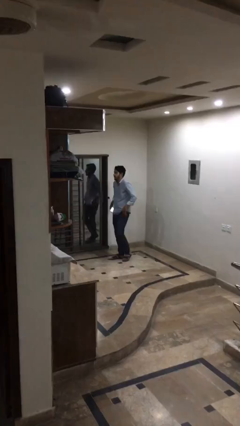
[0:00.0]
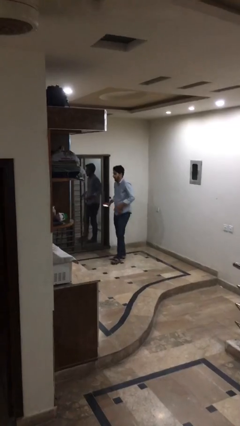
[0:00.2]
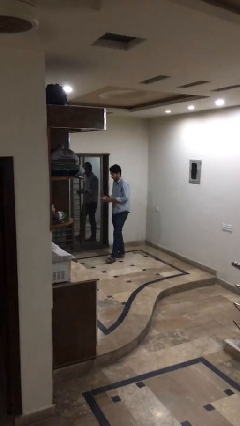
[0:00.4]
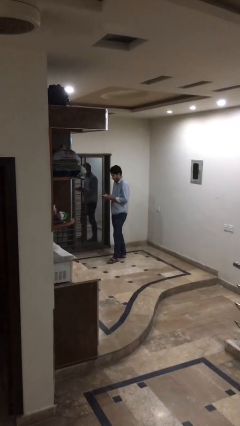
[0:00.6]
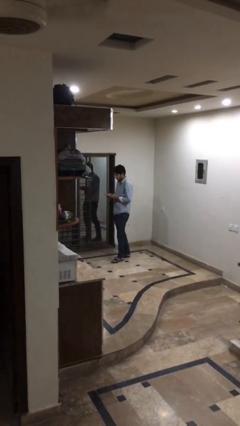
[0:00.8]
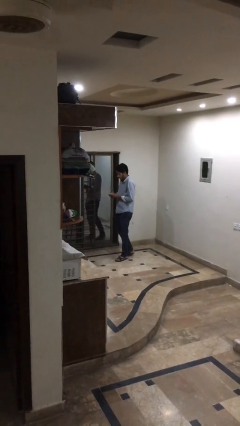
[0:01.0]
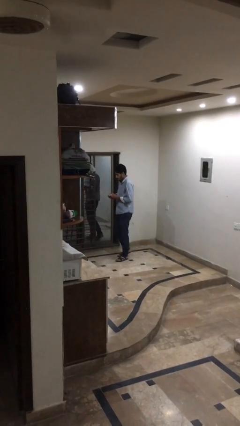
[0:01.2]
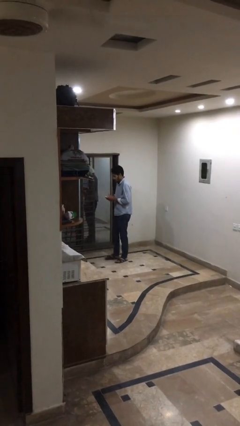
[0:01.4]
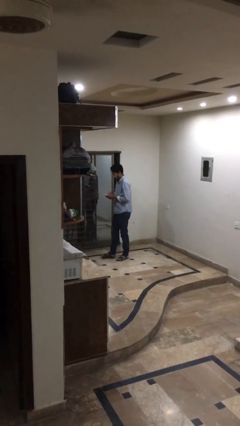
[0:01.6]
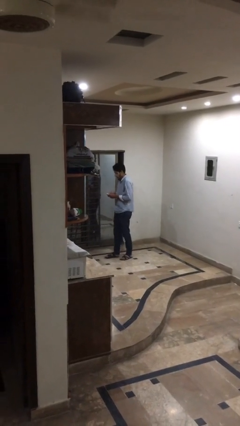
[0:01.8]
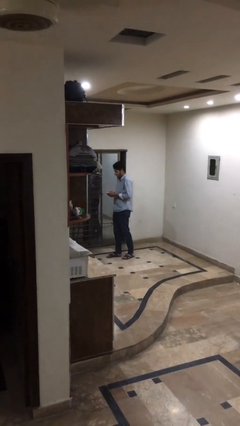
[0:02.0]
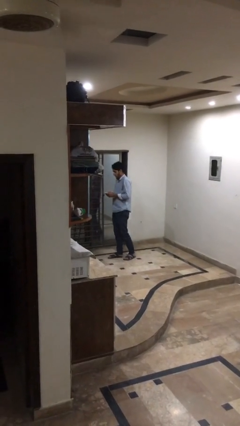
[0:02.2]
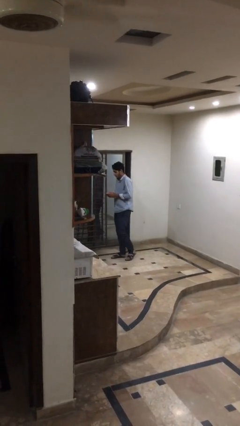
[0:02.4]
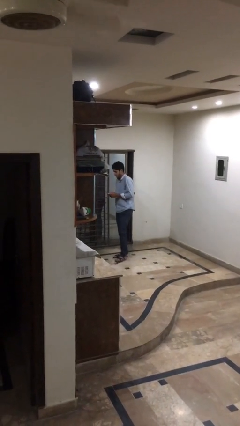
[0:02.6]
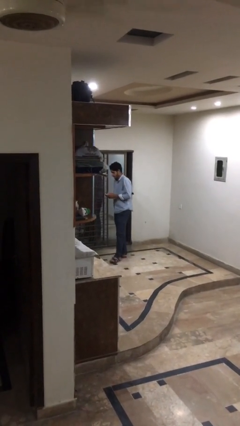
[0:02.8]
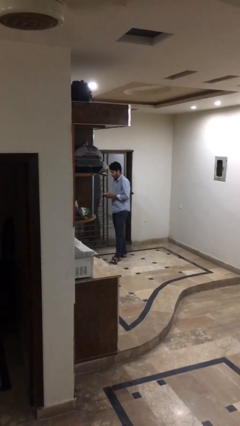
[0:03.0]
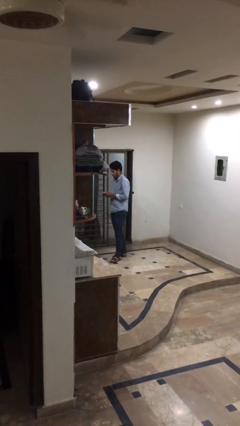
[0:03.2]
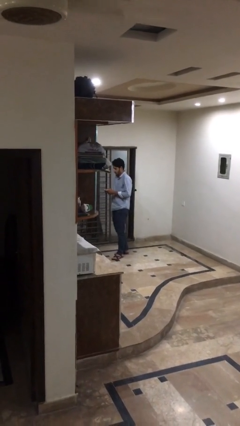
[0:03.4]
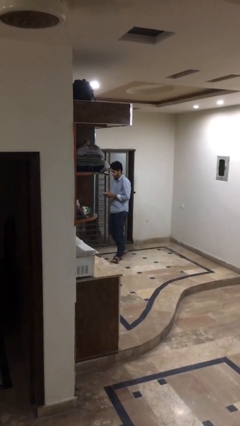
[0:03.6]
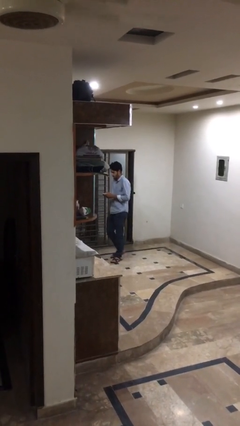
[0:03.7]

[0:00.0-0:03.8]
person texts on phone

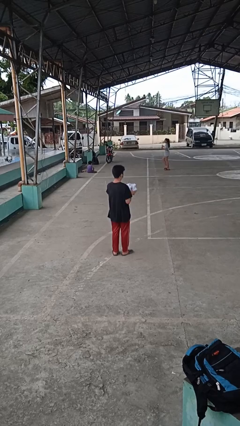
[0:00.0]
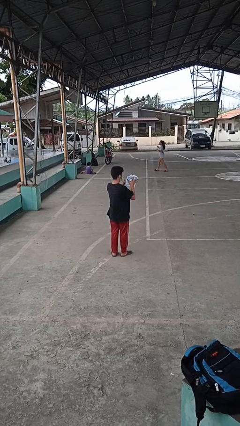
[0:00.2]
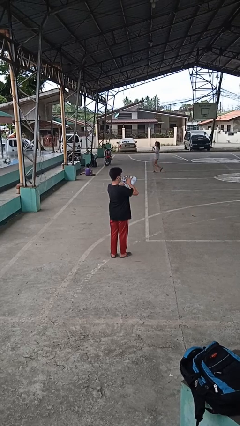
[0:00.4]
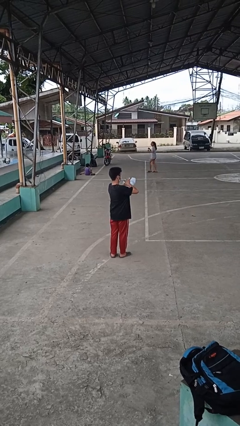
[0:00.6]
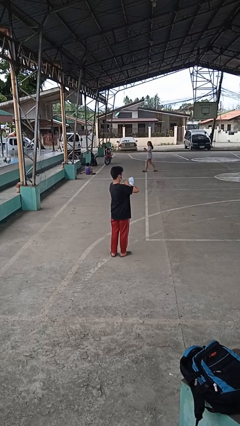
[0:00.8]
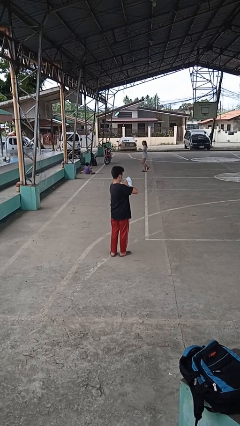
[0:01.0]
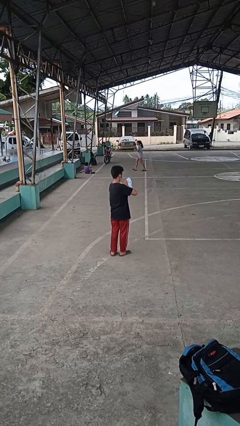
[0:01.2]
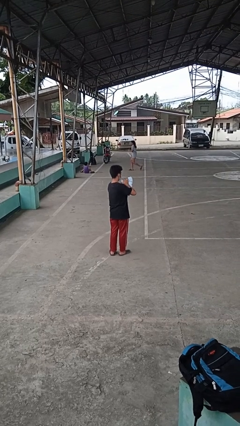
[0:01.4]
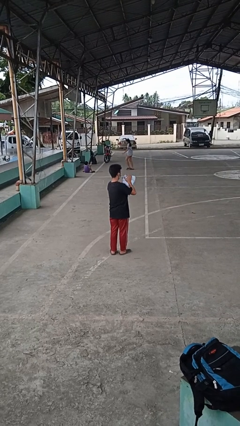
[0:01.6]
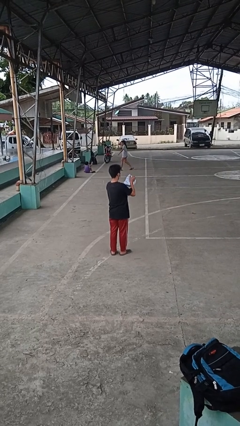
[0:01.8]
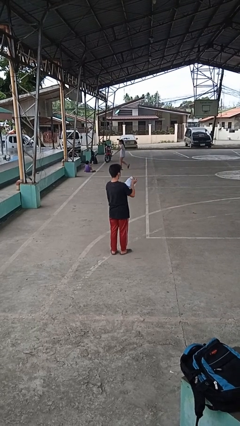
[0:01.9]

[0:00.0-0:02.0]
person squeezes object

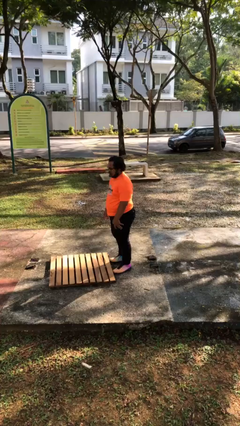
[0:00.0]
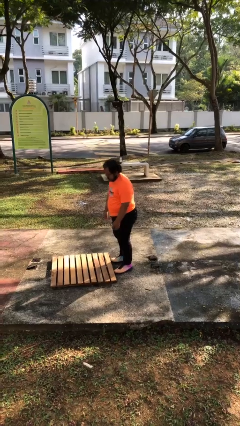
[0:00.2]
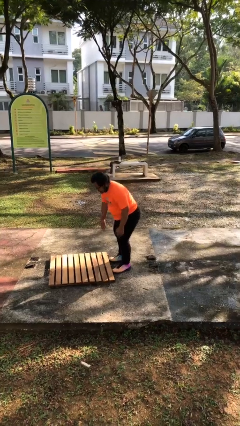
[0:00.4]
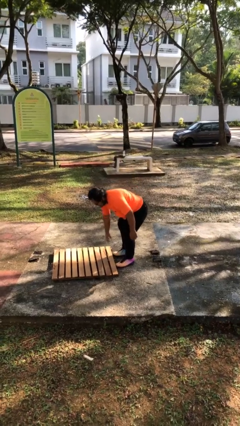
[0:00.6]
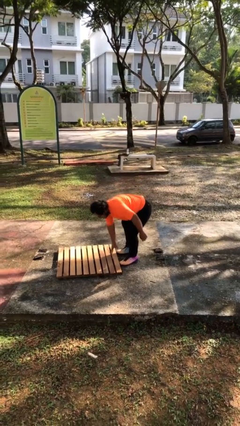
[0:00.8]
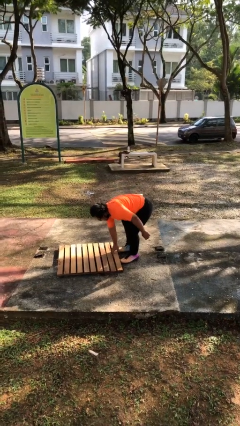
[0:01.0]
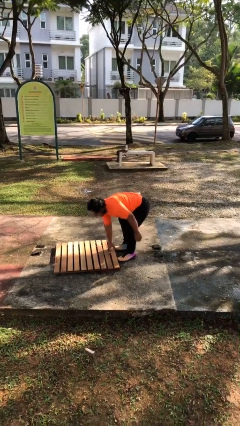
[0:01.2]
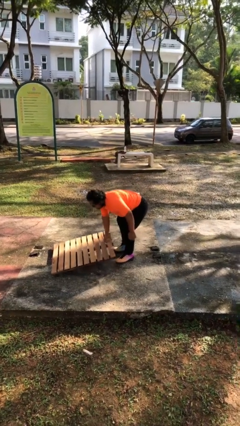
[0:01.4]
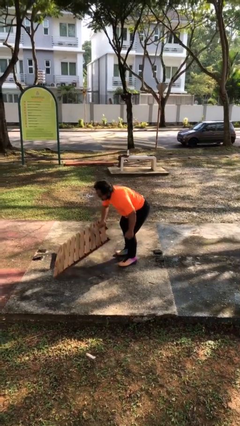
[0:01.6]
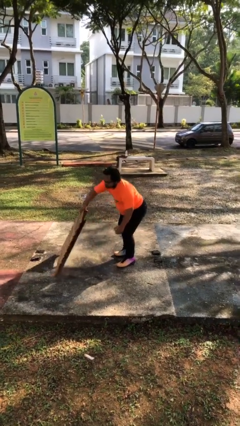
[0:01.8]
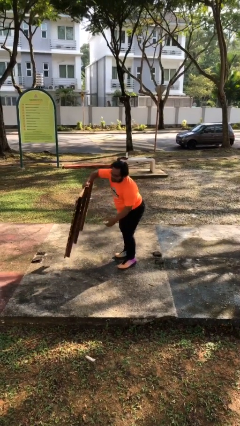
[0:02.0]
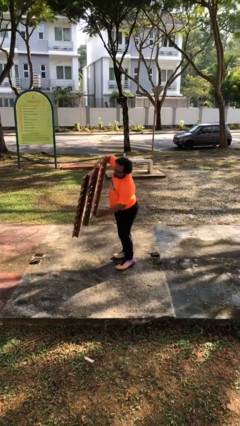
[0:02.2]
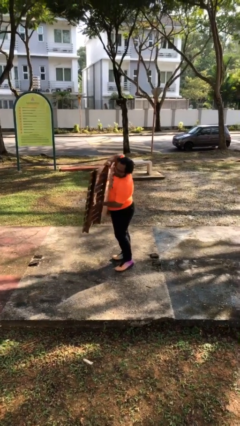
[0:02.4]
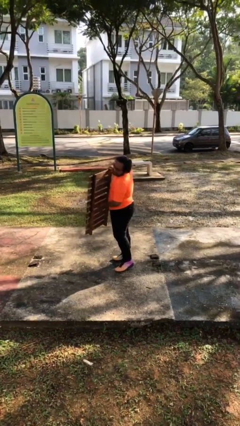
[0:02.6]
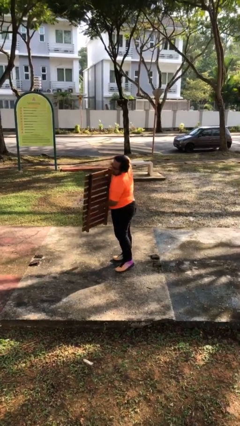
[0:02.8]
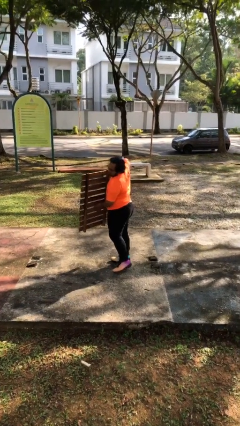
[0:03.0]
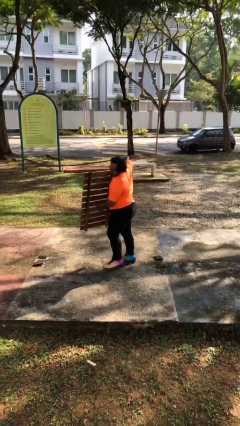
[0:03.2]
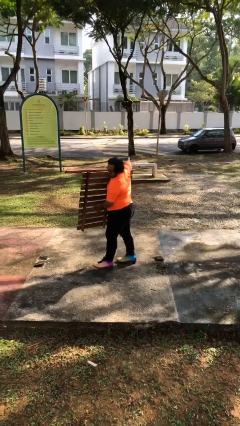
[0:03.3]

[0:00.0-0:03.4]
person picks up object from floor

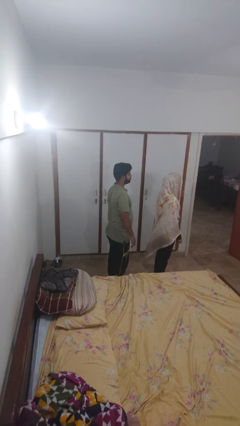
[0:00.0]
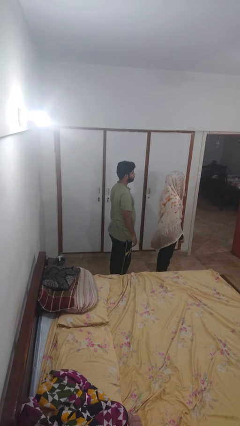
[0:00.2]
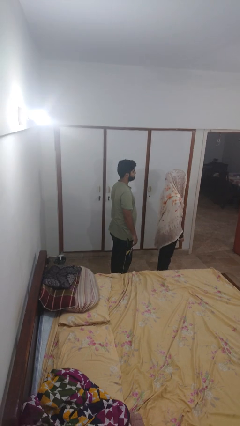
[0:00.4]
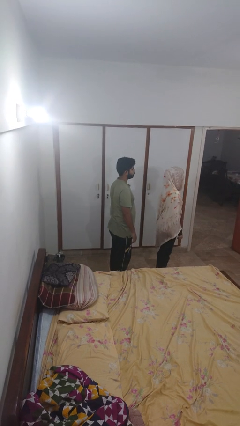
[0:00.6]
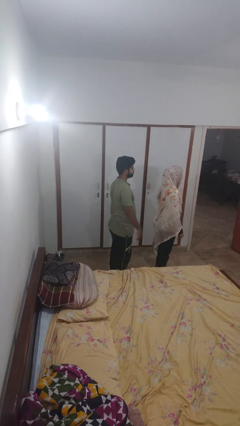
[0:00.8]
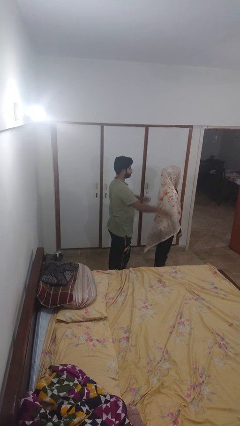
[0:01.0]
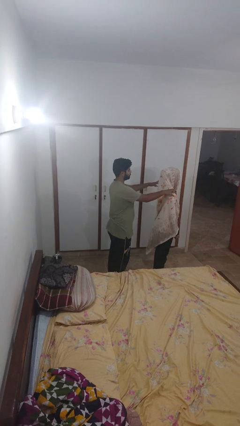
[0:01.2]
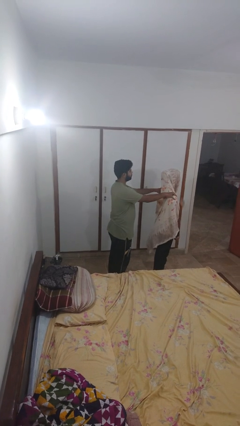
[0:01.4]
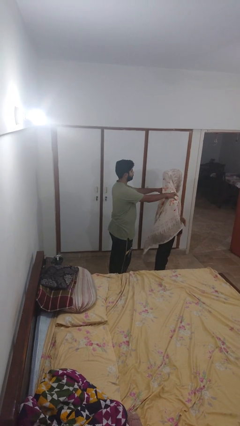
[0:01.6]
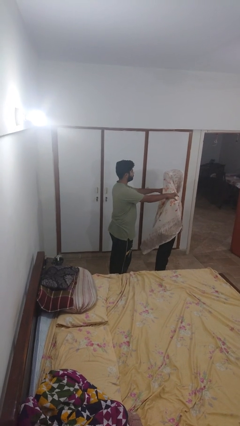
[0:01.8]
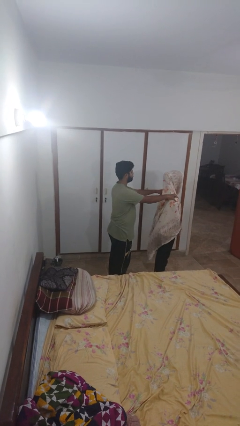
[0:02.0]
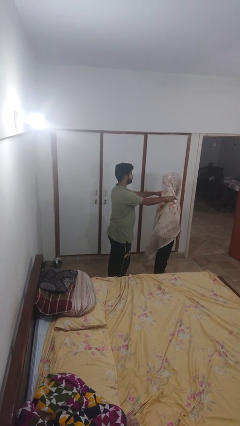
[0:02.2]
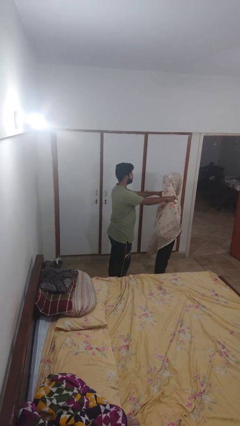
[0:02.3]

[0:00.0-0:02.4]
person grabs person by shoulder

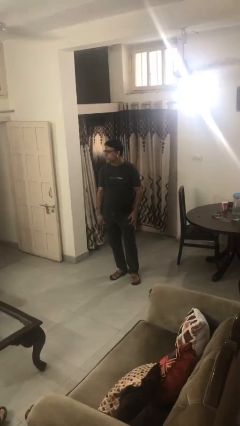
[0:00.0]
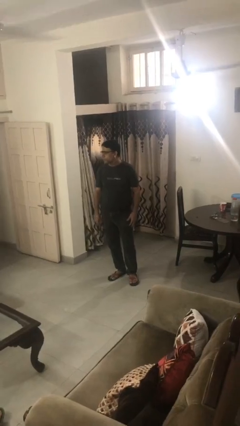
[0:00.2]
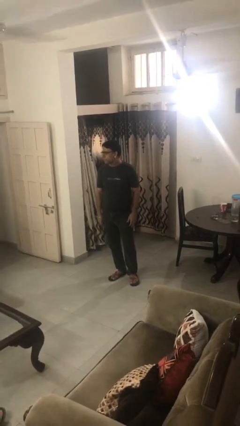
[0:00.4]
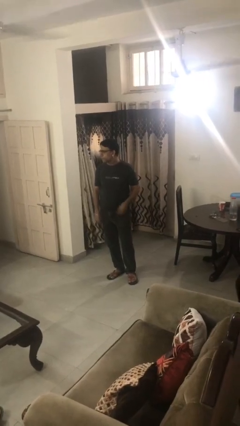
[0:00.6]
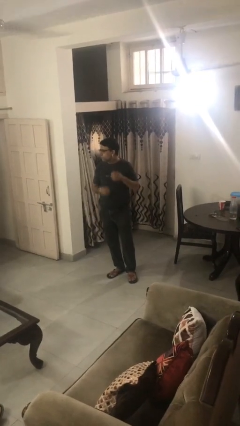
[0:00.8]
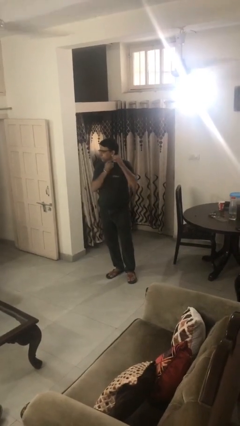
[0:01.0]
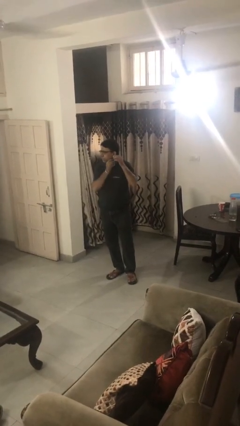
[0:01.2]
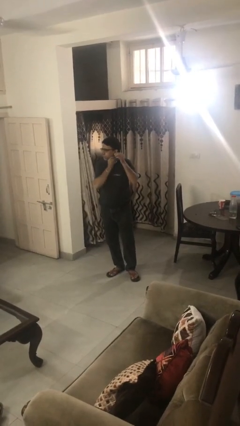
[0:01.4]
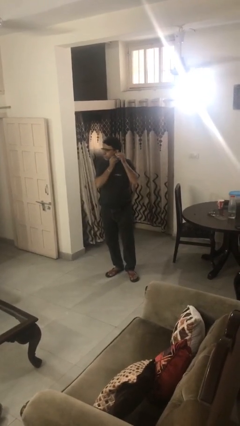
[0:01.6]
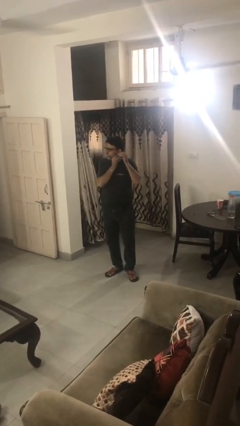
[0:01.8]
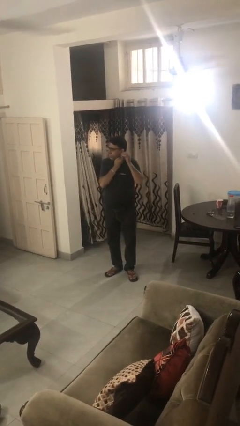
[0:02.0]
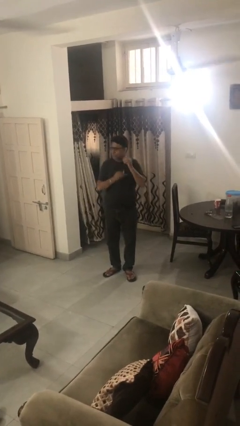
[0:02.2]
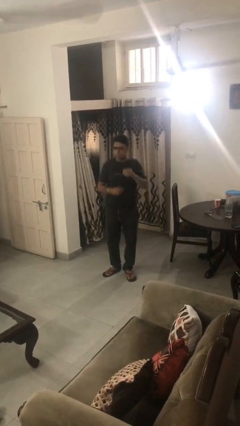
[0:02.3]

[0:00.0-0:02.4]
person takes off earrings

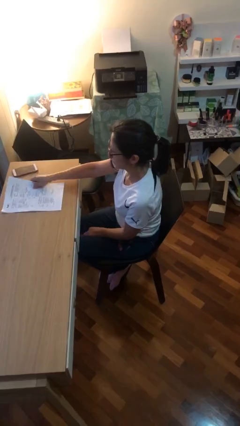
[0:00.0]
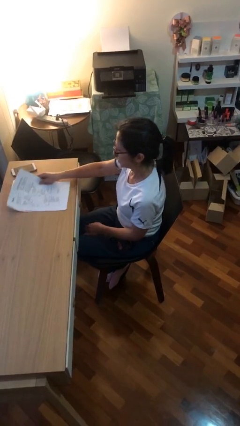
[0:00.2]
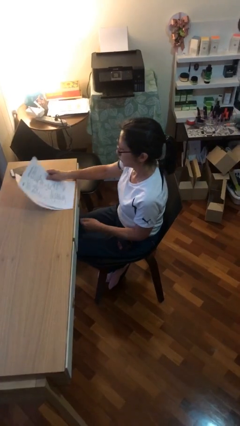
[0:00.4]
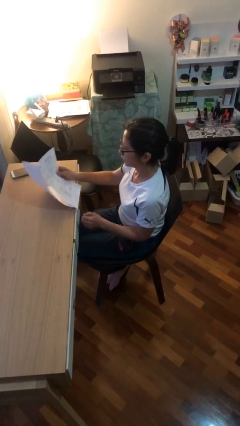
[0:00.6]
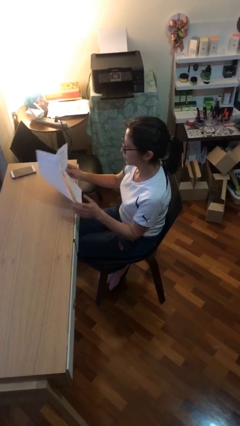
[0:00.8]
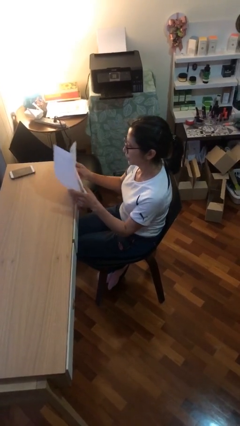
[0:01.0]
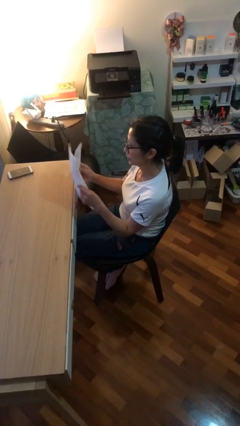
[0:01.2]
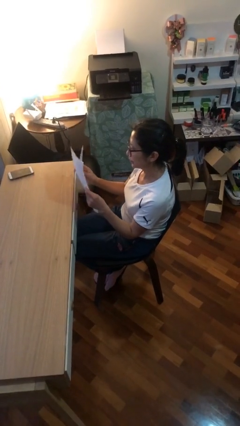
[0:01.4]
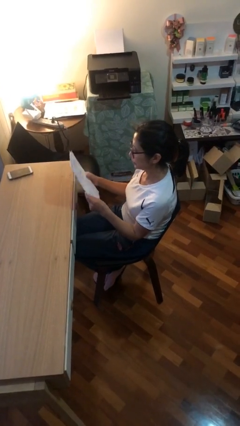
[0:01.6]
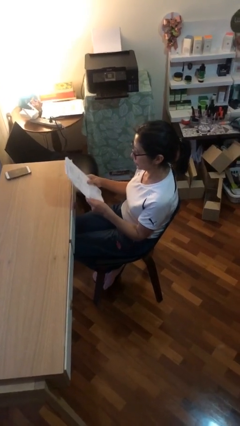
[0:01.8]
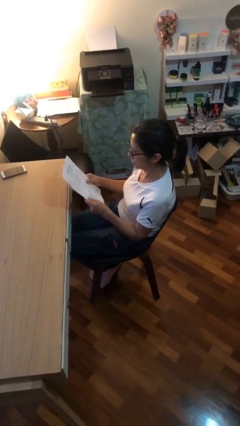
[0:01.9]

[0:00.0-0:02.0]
person picks up object from table

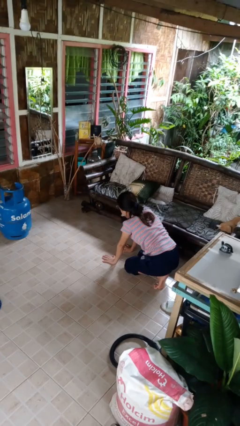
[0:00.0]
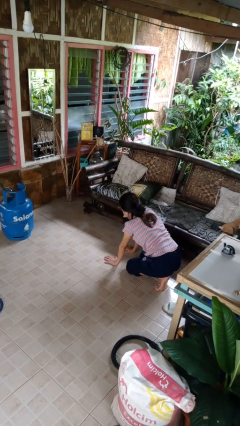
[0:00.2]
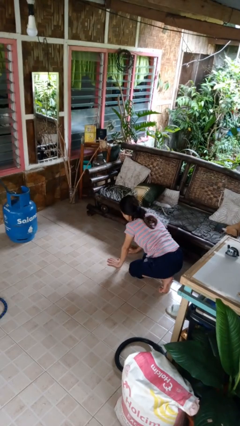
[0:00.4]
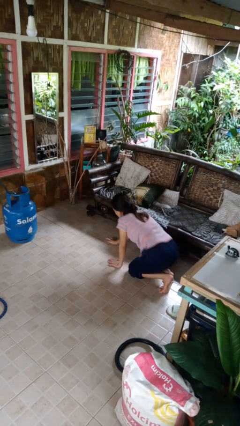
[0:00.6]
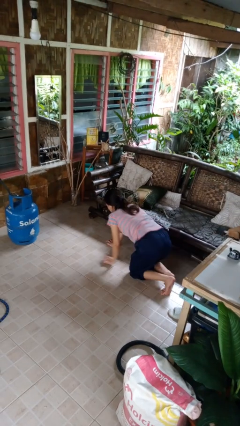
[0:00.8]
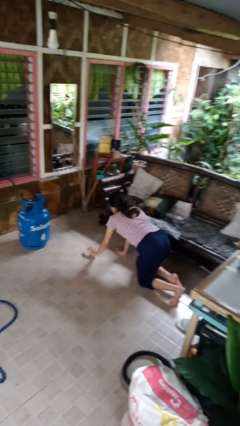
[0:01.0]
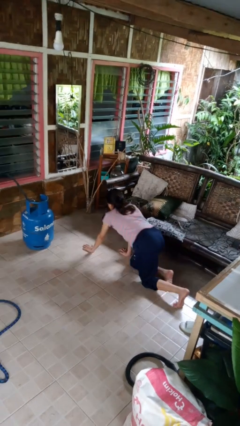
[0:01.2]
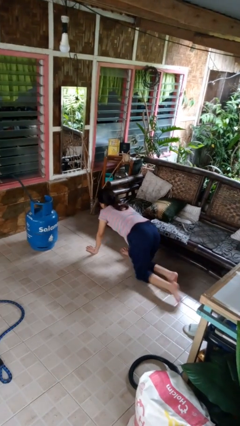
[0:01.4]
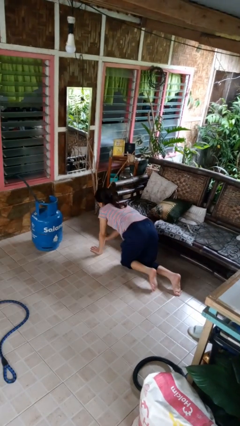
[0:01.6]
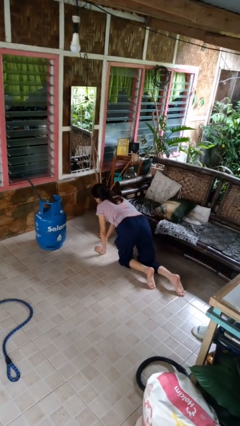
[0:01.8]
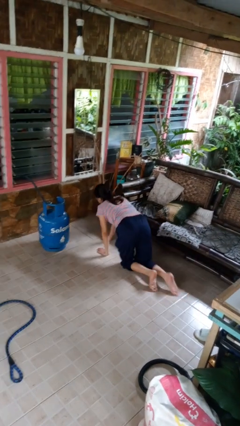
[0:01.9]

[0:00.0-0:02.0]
person crawls
